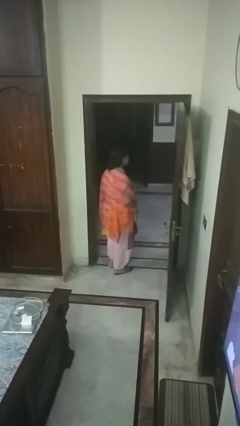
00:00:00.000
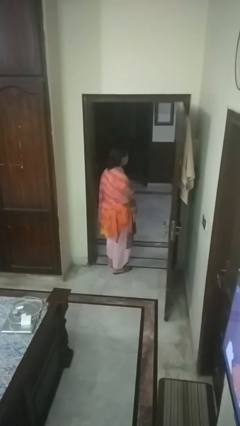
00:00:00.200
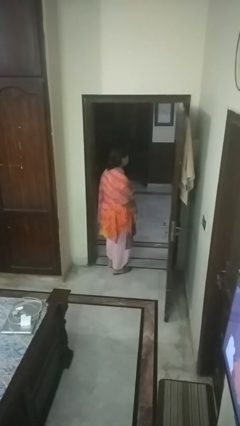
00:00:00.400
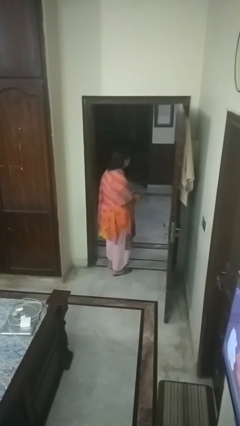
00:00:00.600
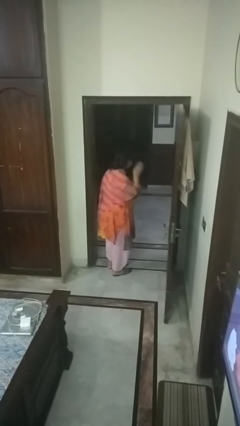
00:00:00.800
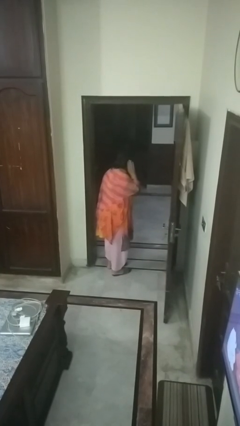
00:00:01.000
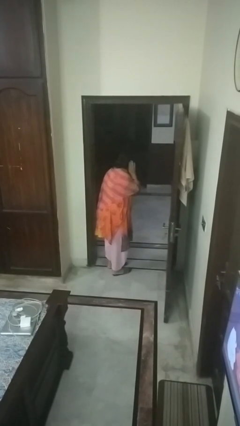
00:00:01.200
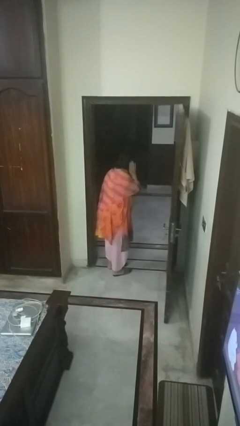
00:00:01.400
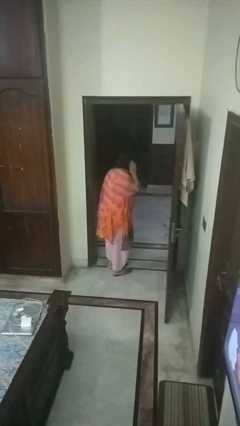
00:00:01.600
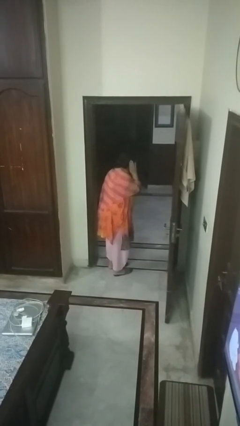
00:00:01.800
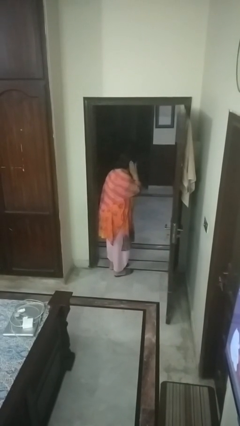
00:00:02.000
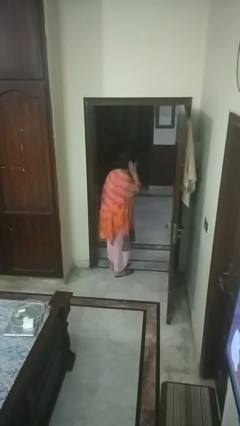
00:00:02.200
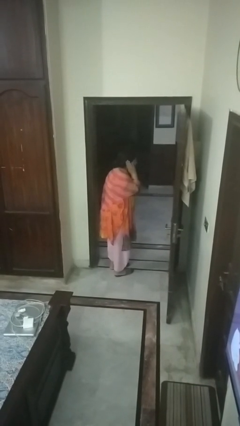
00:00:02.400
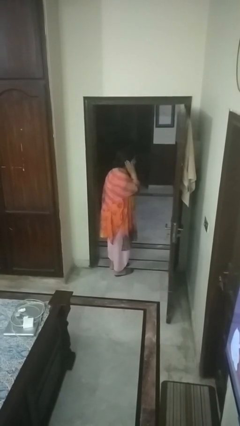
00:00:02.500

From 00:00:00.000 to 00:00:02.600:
person gestures listen closely

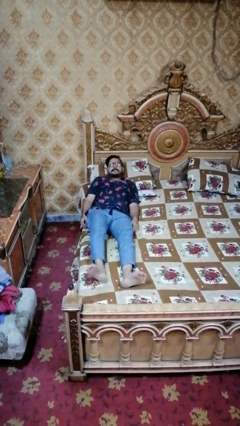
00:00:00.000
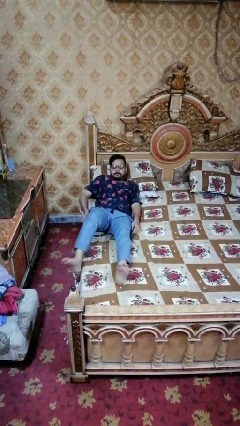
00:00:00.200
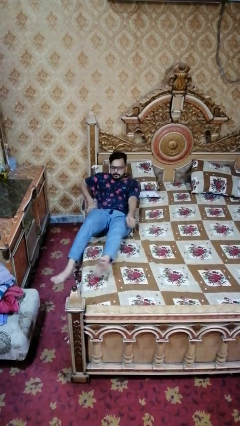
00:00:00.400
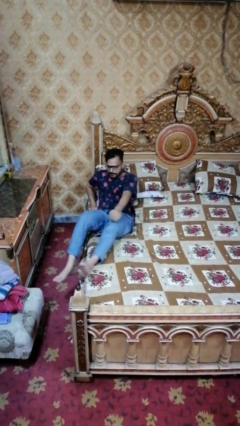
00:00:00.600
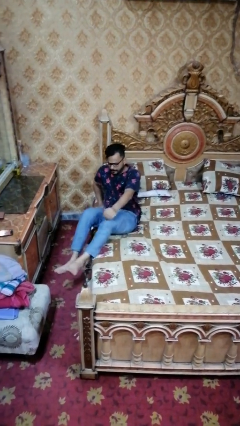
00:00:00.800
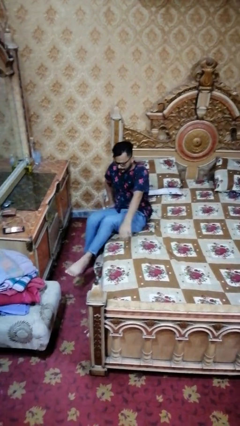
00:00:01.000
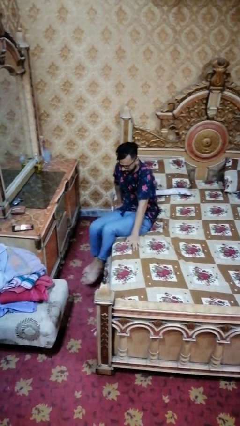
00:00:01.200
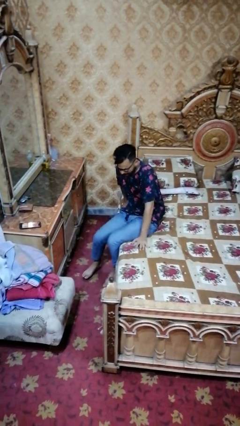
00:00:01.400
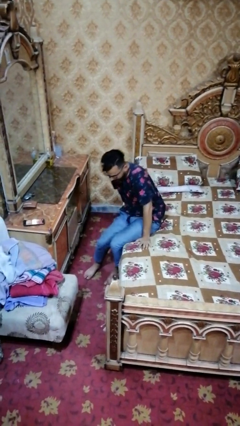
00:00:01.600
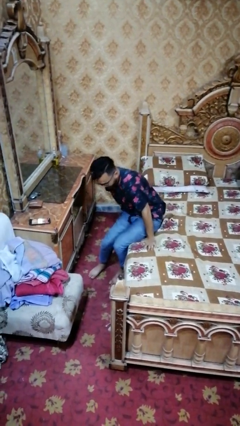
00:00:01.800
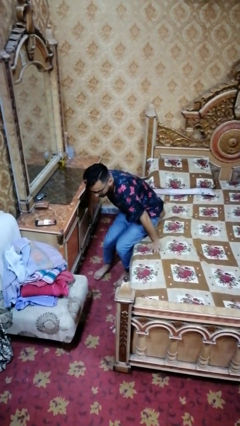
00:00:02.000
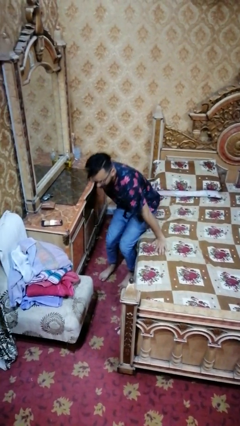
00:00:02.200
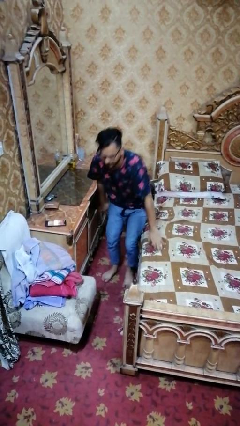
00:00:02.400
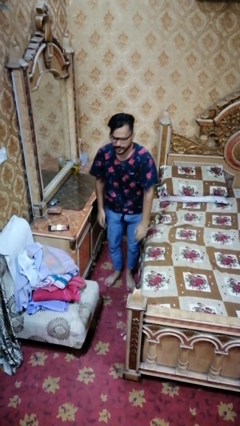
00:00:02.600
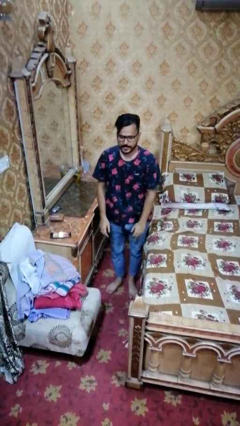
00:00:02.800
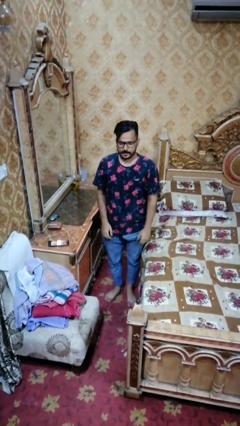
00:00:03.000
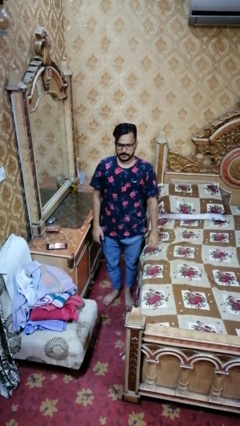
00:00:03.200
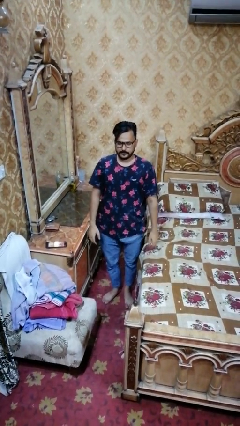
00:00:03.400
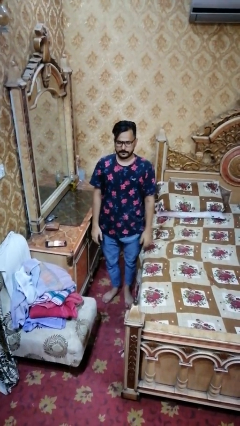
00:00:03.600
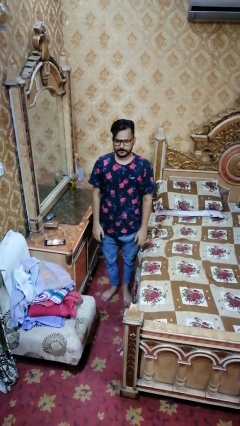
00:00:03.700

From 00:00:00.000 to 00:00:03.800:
person stands up

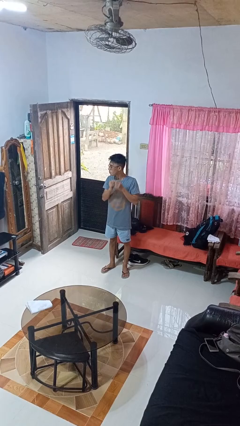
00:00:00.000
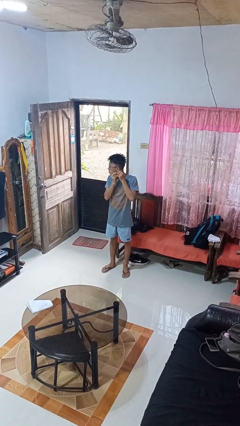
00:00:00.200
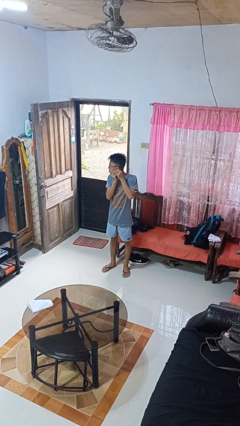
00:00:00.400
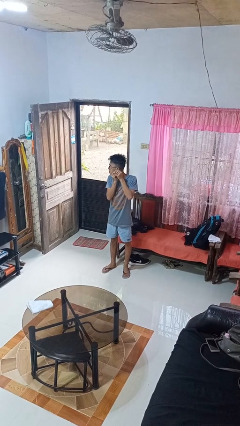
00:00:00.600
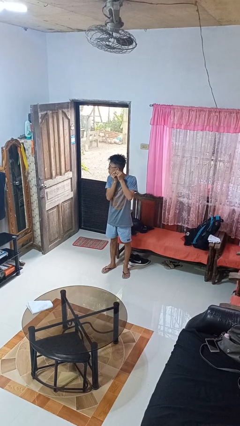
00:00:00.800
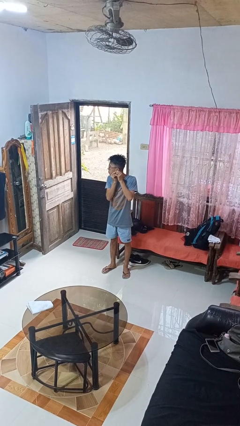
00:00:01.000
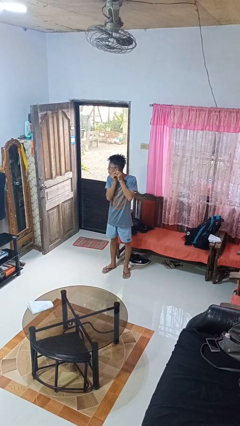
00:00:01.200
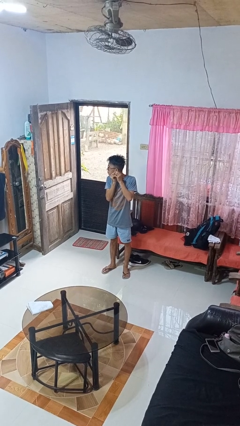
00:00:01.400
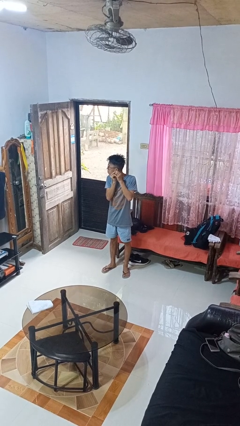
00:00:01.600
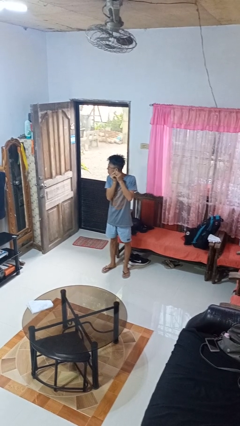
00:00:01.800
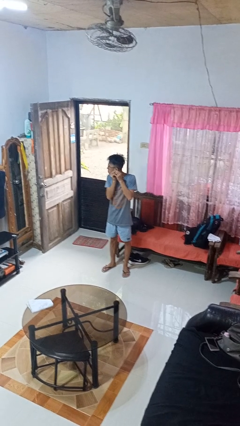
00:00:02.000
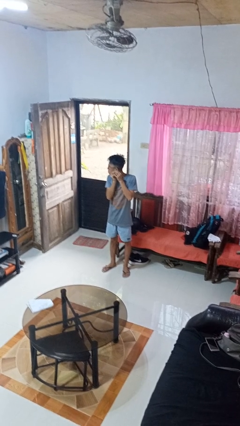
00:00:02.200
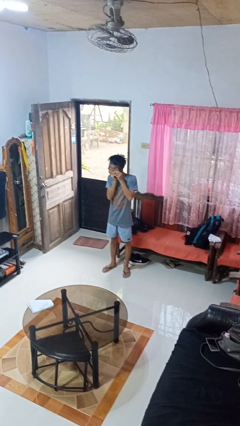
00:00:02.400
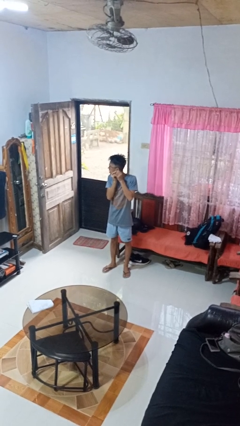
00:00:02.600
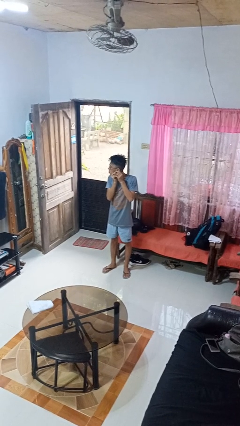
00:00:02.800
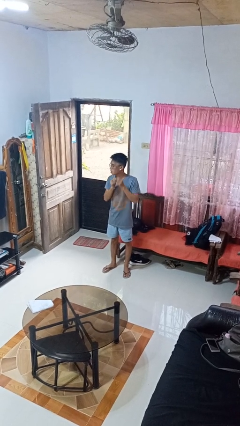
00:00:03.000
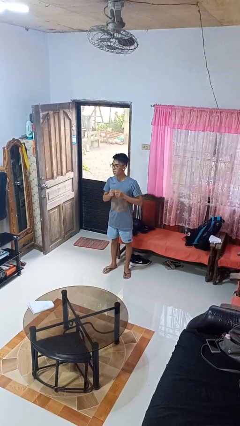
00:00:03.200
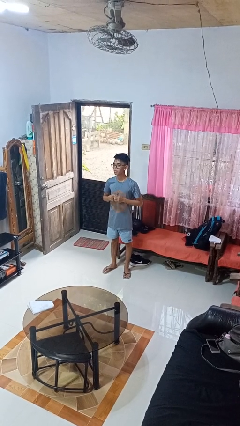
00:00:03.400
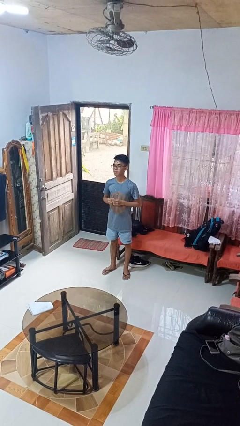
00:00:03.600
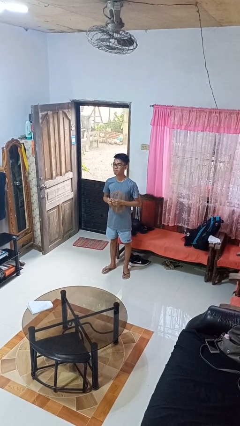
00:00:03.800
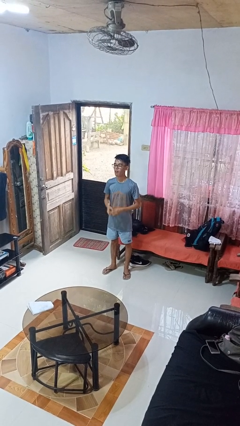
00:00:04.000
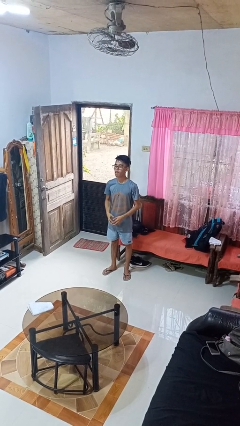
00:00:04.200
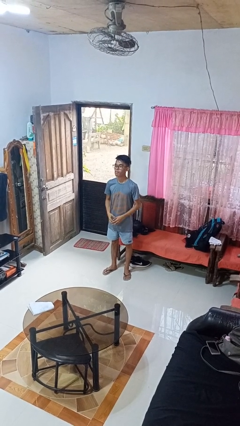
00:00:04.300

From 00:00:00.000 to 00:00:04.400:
person puts on earrings

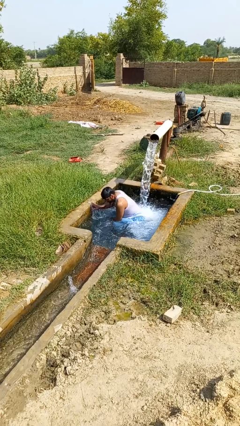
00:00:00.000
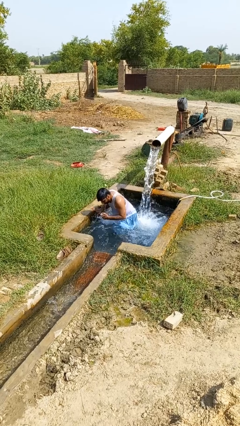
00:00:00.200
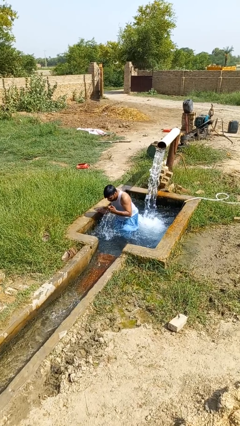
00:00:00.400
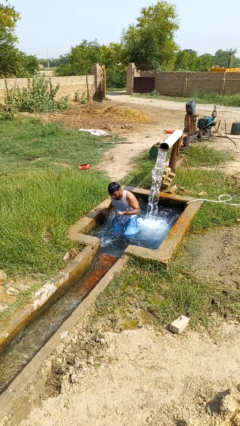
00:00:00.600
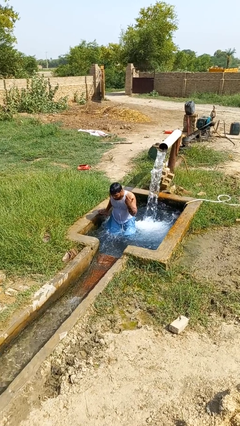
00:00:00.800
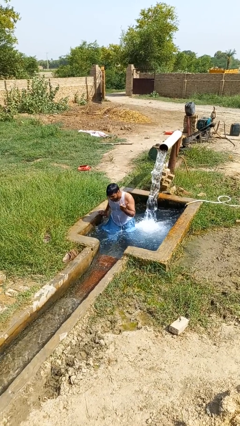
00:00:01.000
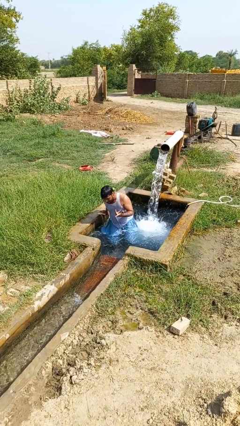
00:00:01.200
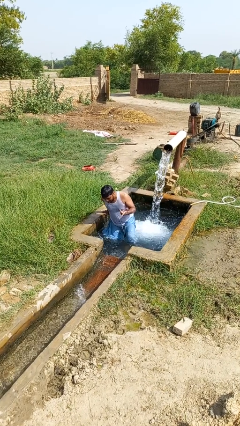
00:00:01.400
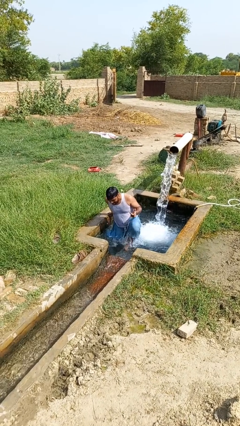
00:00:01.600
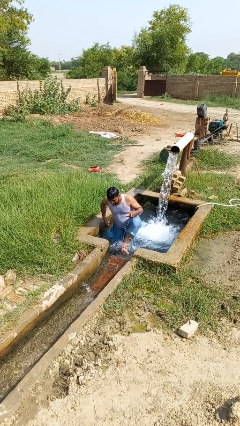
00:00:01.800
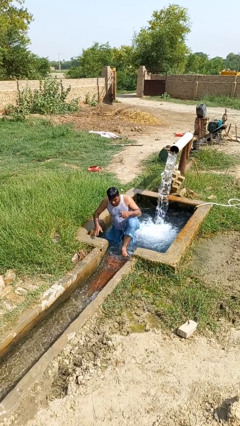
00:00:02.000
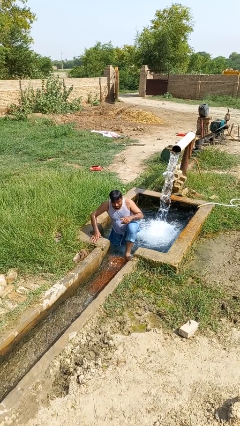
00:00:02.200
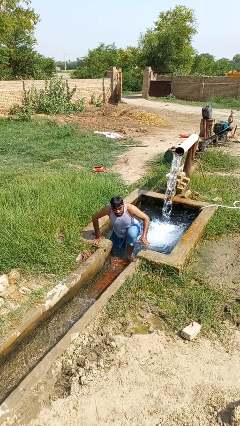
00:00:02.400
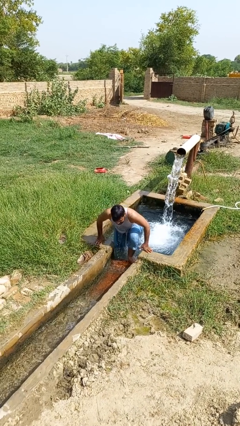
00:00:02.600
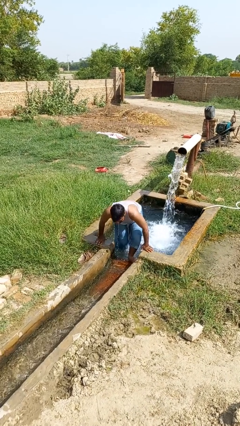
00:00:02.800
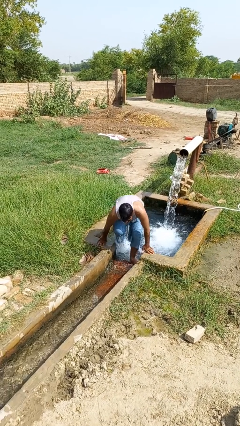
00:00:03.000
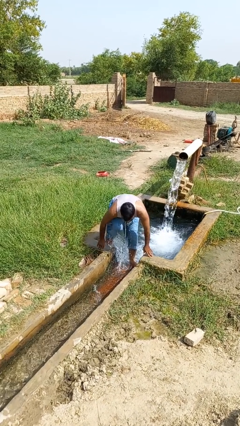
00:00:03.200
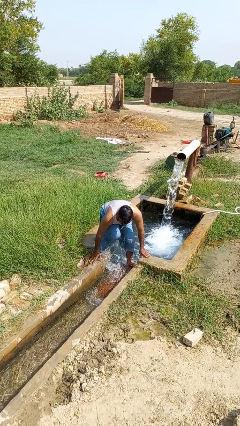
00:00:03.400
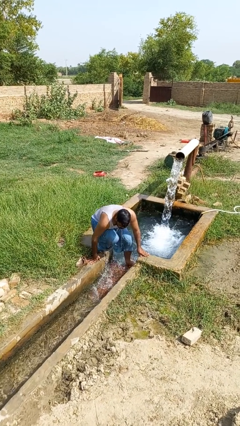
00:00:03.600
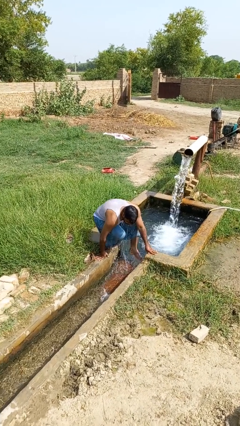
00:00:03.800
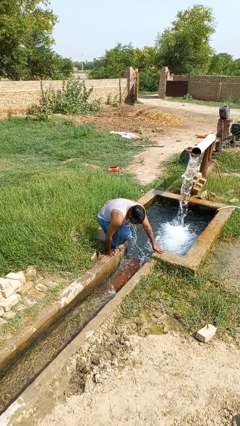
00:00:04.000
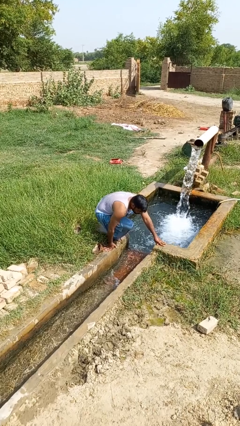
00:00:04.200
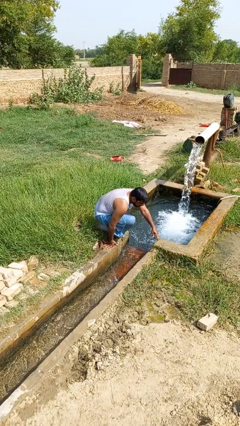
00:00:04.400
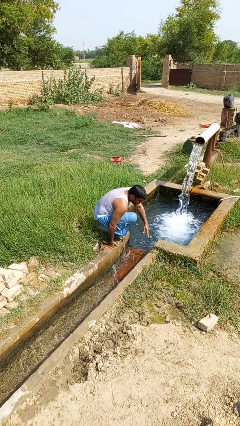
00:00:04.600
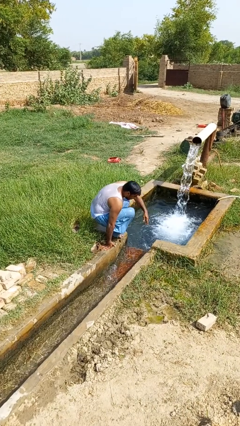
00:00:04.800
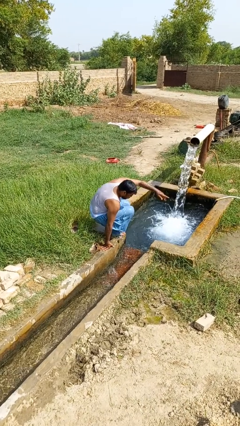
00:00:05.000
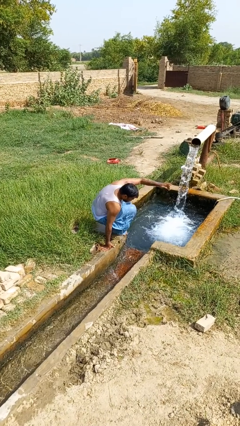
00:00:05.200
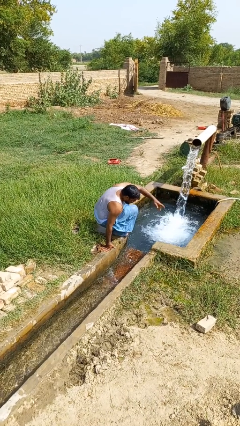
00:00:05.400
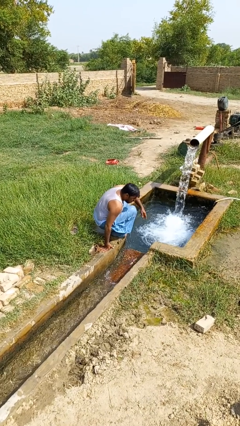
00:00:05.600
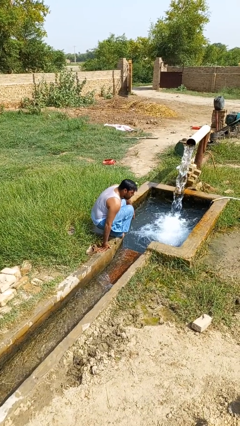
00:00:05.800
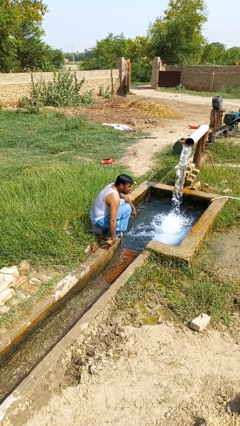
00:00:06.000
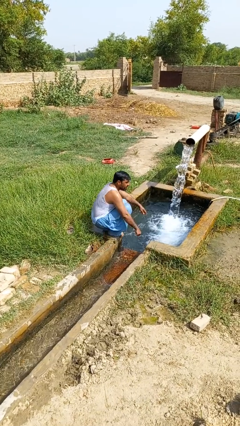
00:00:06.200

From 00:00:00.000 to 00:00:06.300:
person exits pool

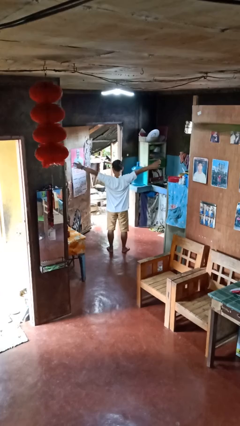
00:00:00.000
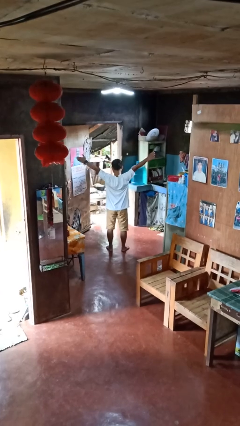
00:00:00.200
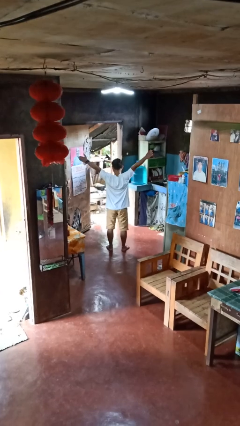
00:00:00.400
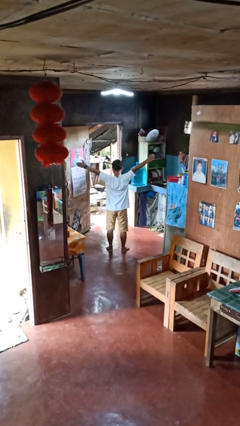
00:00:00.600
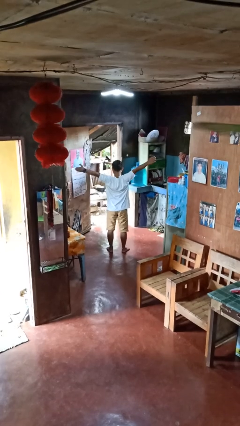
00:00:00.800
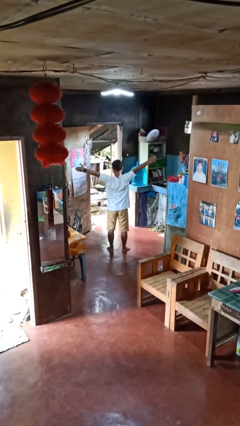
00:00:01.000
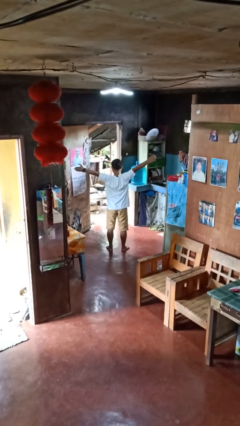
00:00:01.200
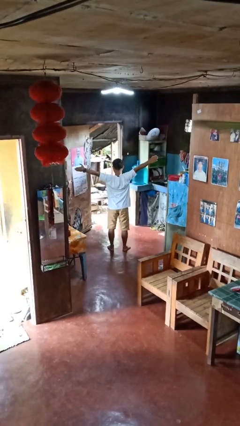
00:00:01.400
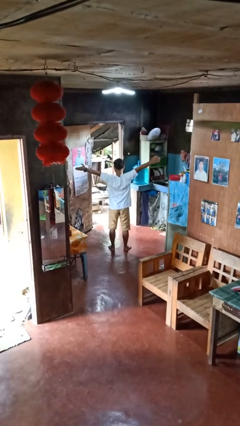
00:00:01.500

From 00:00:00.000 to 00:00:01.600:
person stretches arms to side
